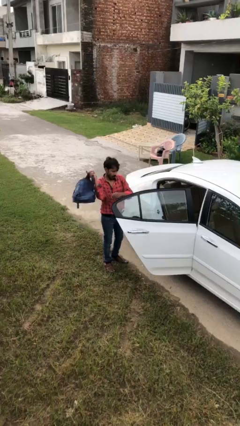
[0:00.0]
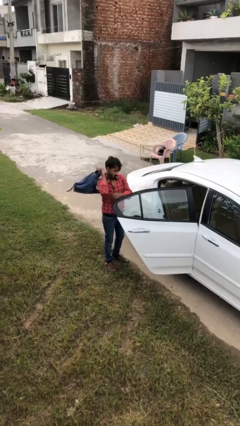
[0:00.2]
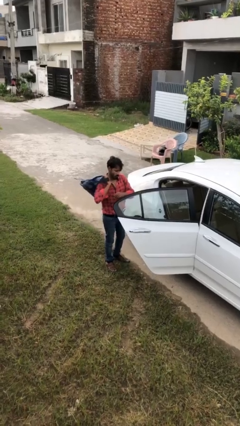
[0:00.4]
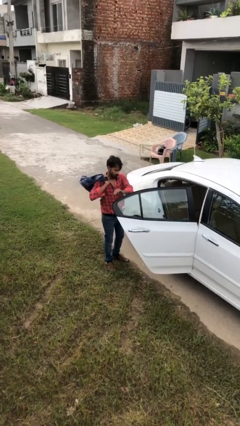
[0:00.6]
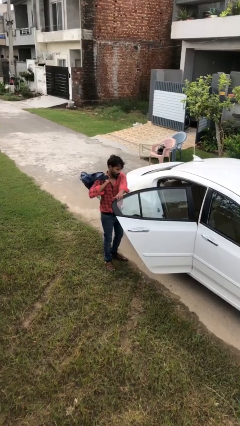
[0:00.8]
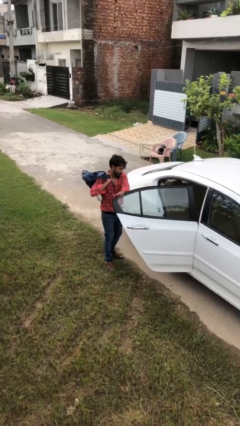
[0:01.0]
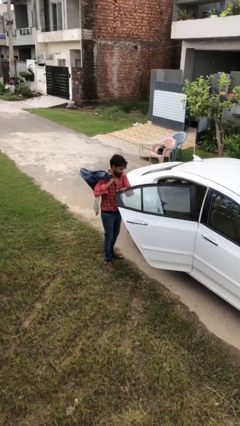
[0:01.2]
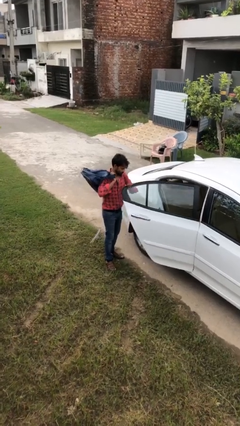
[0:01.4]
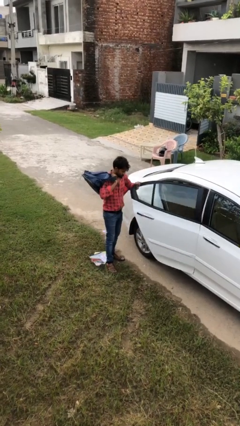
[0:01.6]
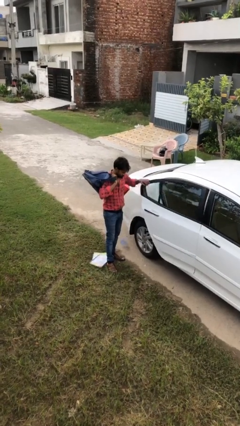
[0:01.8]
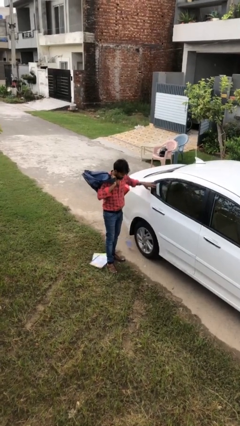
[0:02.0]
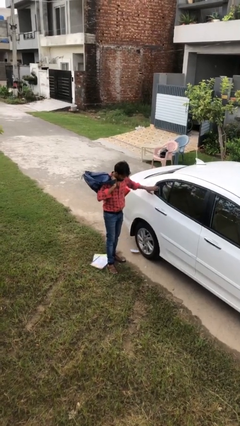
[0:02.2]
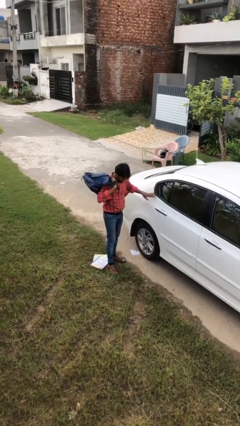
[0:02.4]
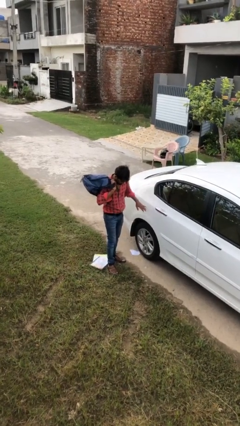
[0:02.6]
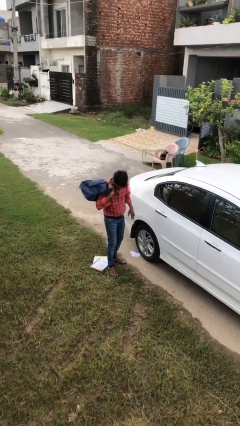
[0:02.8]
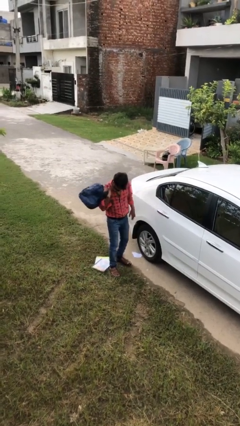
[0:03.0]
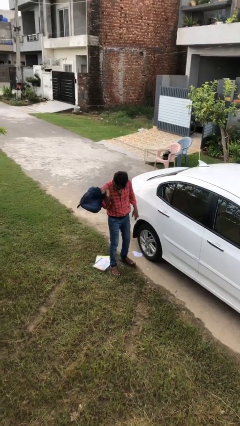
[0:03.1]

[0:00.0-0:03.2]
person closes car door

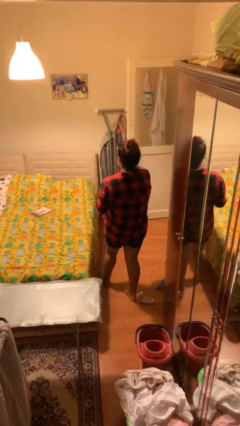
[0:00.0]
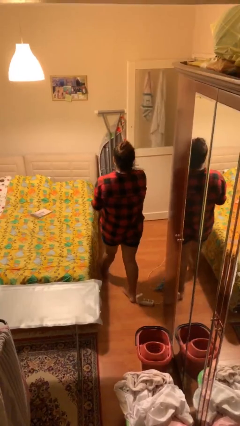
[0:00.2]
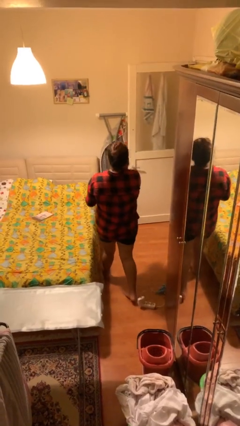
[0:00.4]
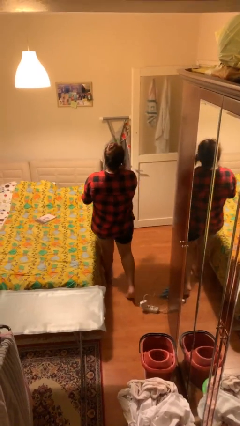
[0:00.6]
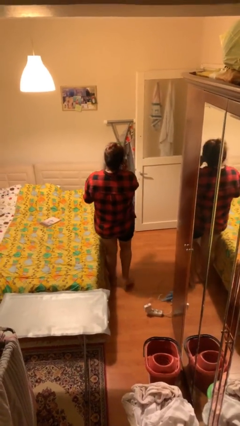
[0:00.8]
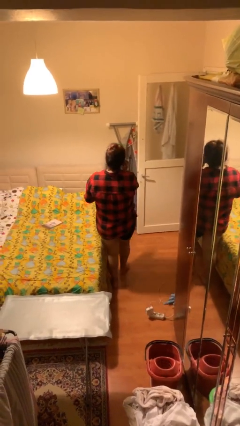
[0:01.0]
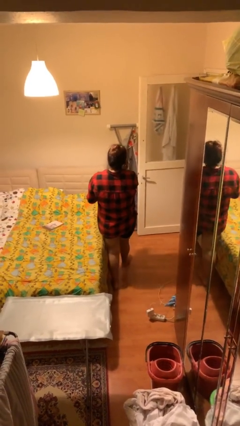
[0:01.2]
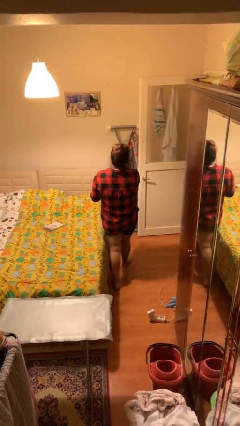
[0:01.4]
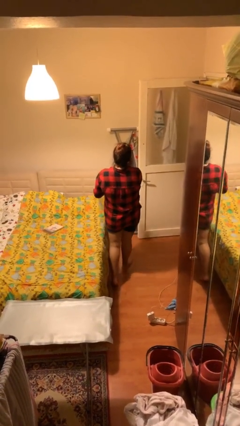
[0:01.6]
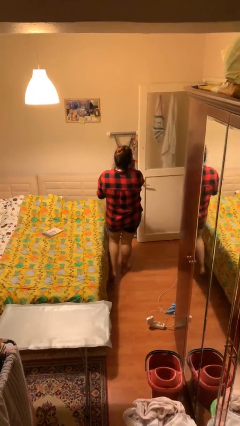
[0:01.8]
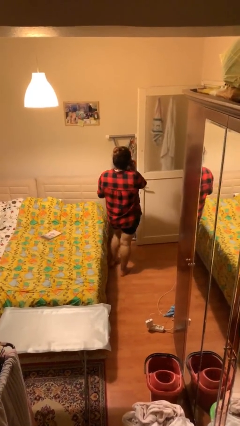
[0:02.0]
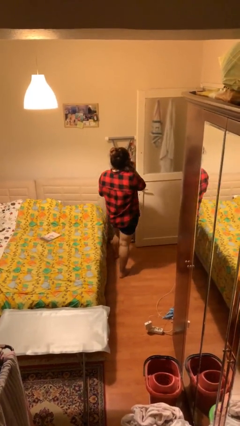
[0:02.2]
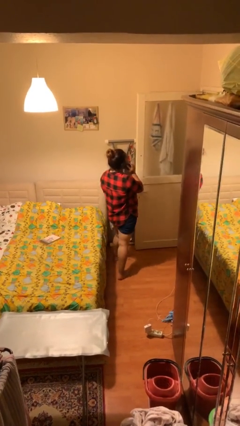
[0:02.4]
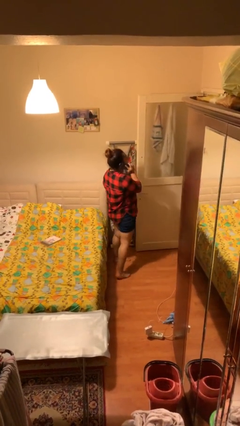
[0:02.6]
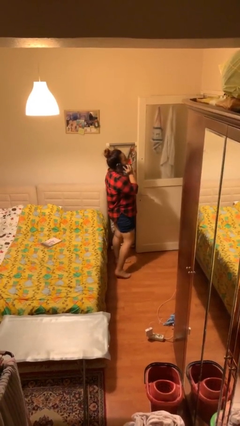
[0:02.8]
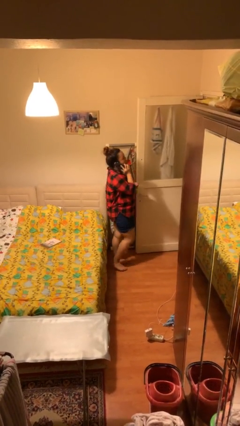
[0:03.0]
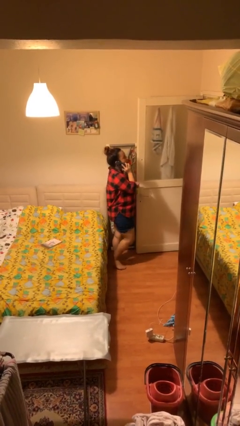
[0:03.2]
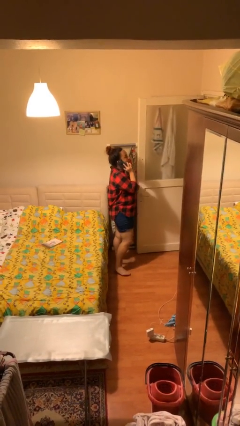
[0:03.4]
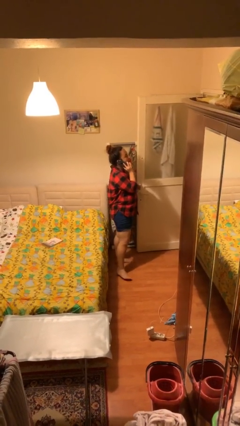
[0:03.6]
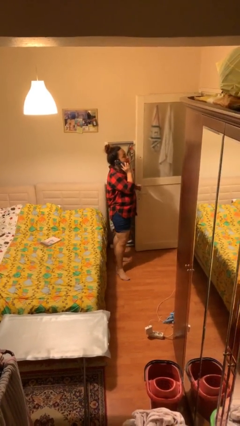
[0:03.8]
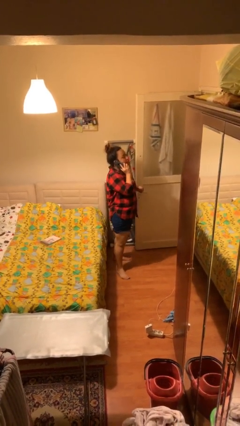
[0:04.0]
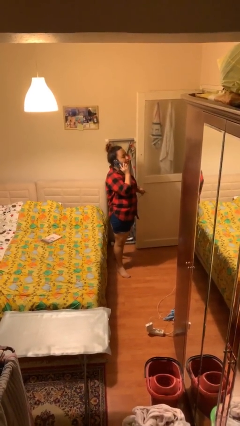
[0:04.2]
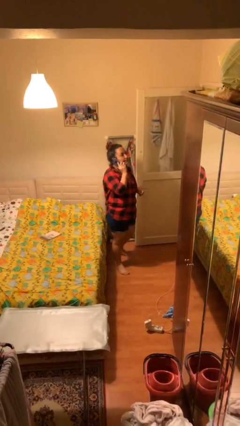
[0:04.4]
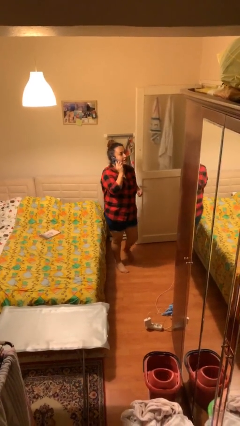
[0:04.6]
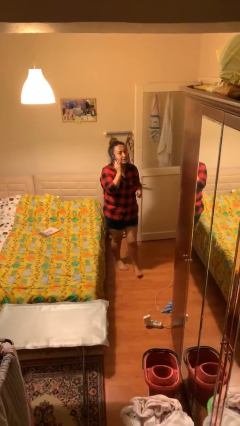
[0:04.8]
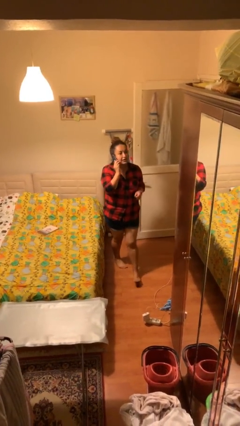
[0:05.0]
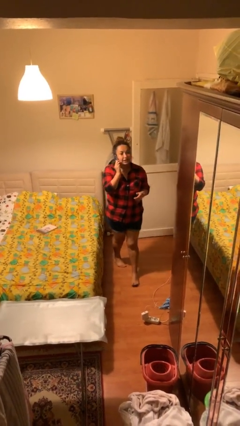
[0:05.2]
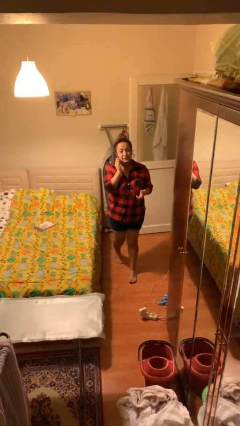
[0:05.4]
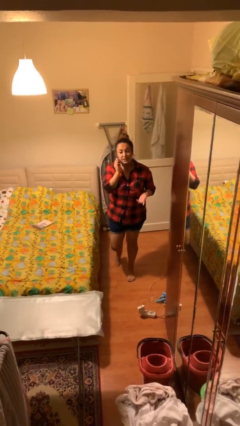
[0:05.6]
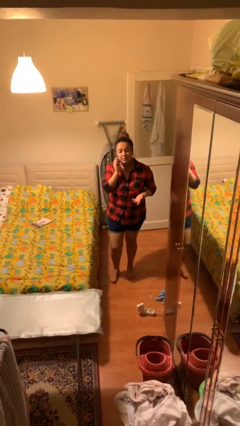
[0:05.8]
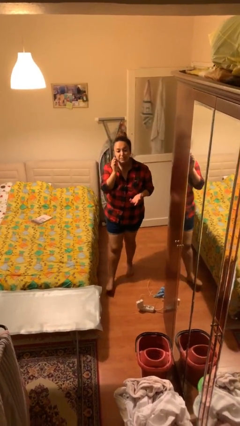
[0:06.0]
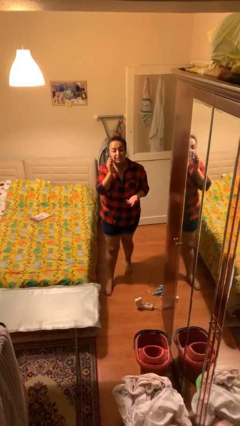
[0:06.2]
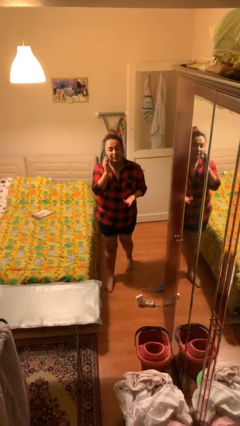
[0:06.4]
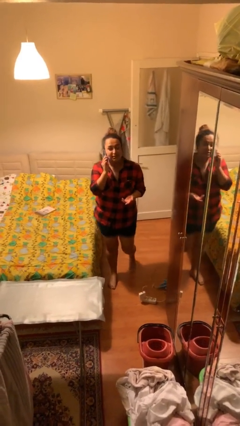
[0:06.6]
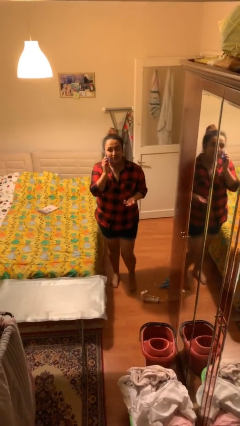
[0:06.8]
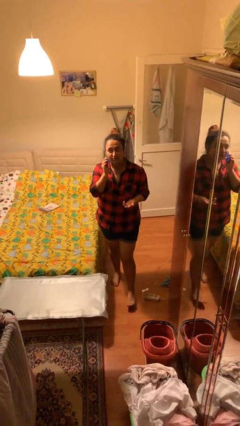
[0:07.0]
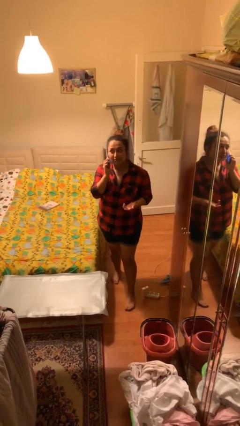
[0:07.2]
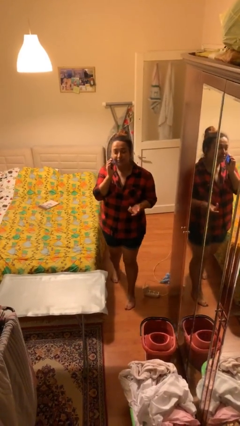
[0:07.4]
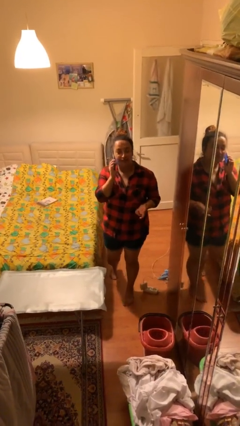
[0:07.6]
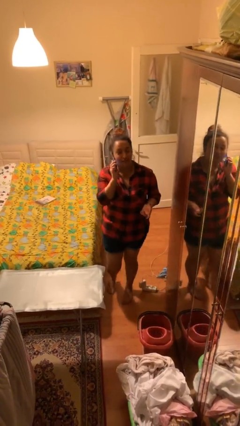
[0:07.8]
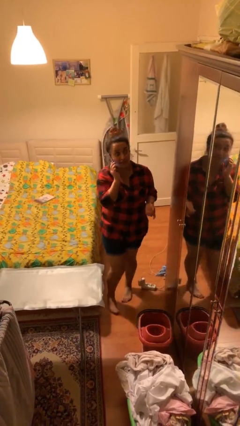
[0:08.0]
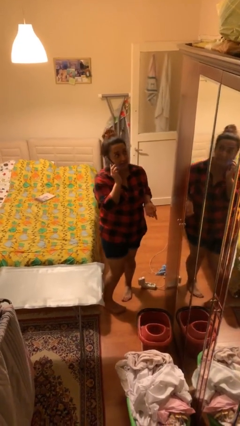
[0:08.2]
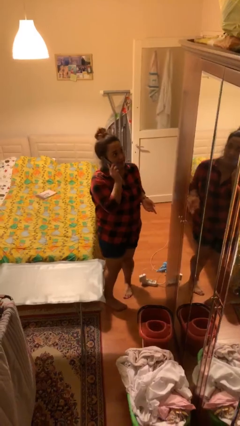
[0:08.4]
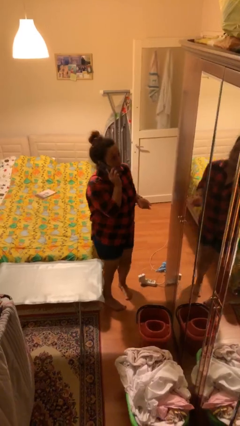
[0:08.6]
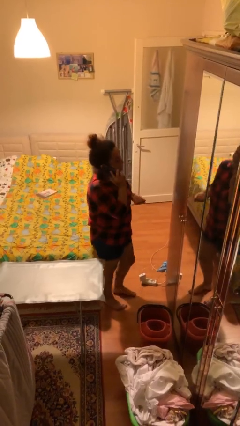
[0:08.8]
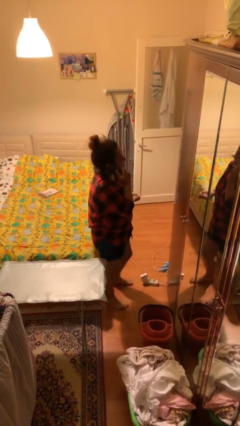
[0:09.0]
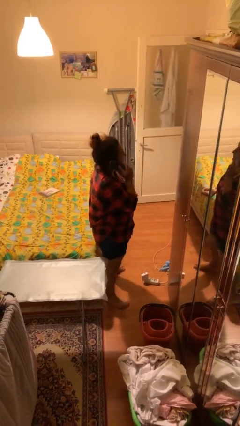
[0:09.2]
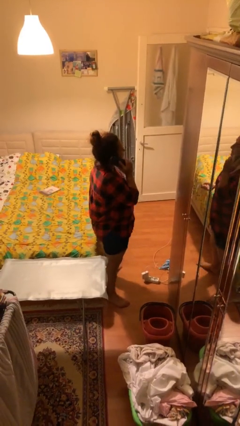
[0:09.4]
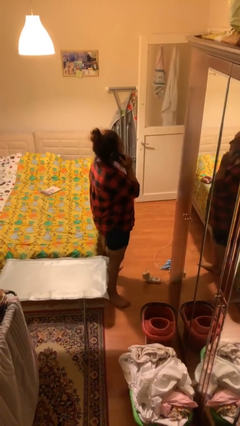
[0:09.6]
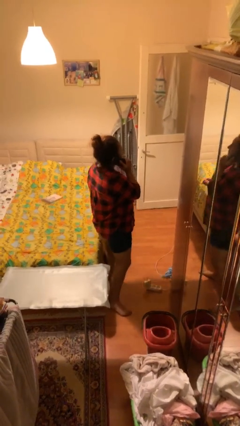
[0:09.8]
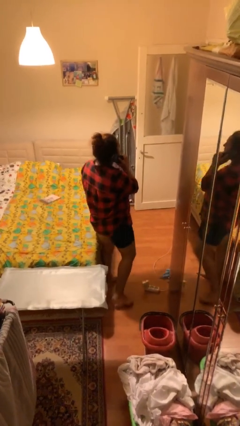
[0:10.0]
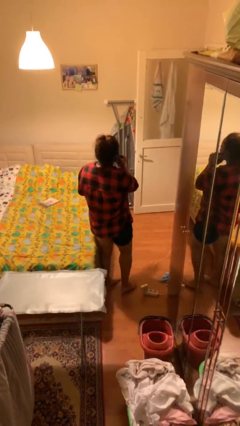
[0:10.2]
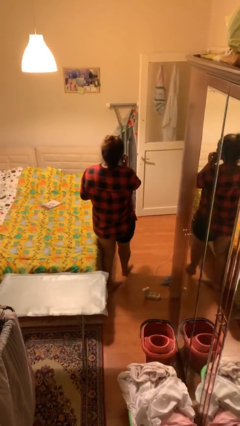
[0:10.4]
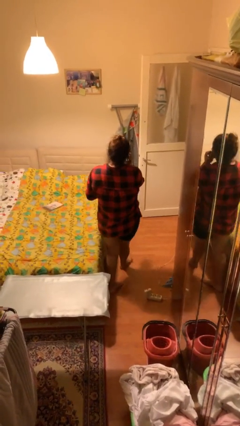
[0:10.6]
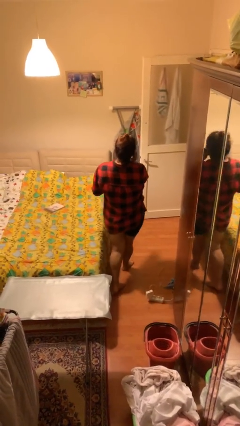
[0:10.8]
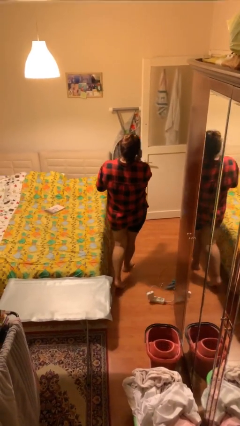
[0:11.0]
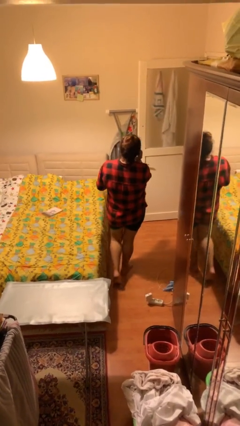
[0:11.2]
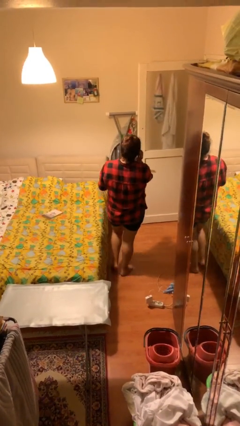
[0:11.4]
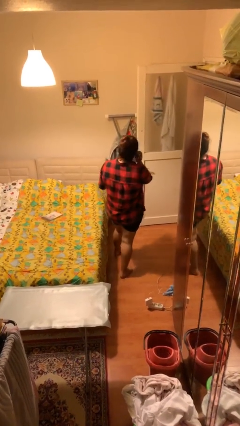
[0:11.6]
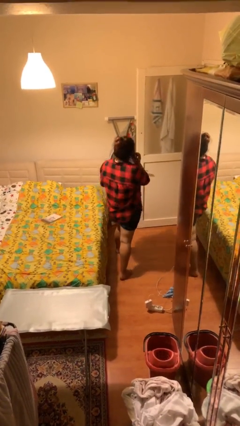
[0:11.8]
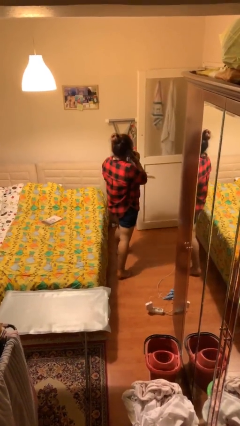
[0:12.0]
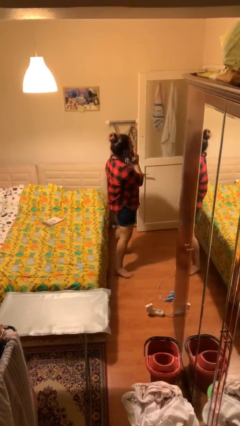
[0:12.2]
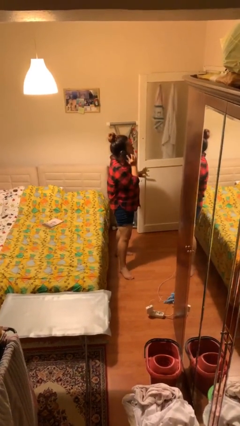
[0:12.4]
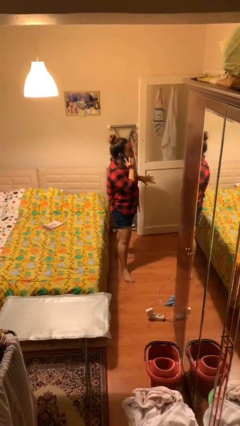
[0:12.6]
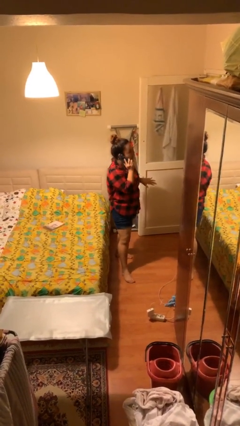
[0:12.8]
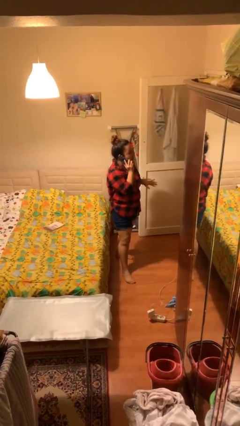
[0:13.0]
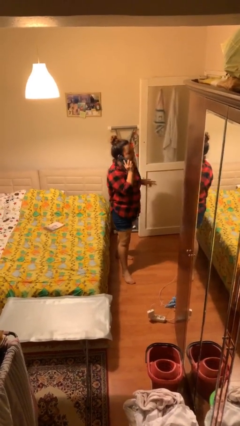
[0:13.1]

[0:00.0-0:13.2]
person talks on phone

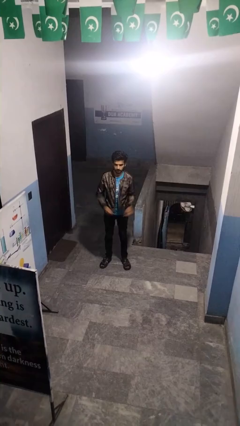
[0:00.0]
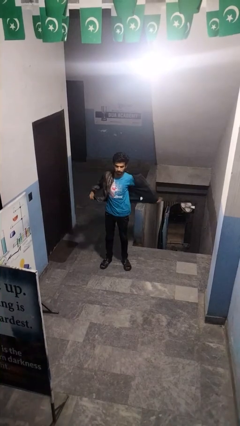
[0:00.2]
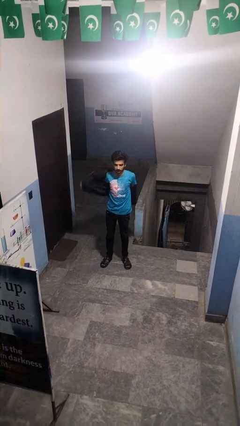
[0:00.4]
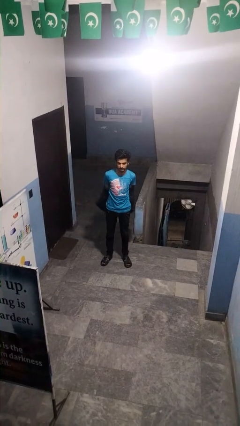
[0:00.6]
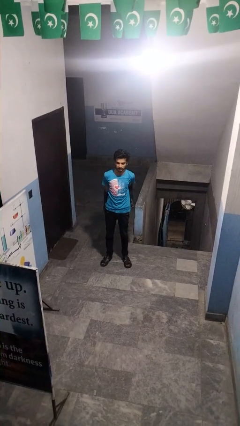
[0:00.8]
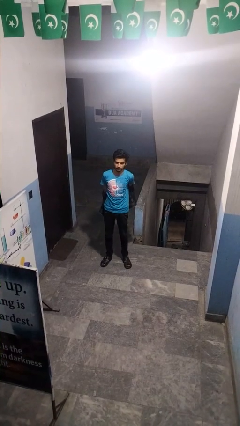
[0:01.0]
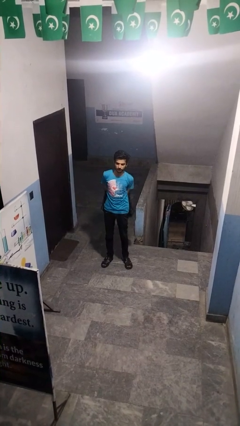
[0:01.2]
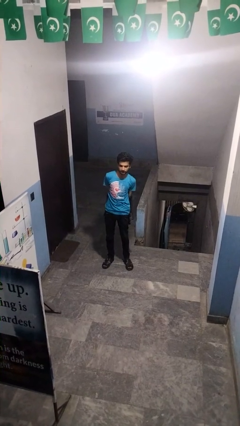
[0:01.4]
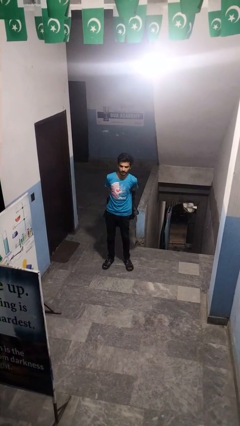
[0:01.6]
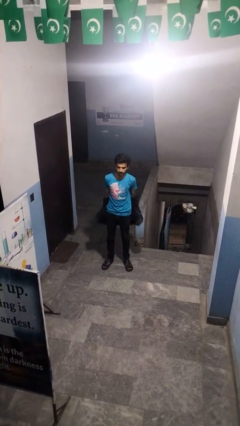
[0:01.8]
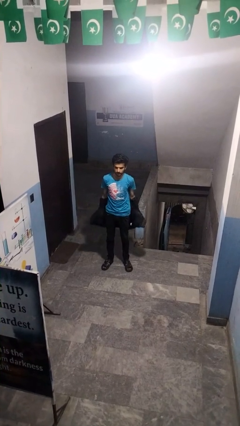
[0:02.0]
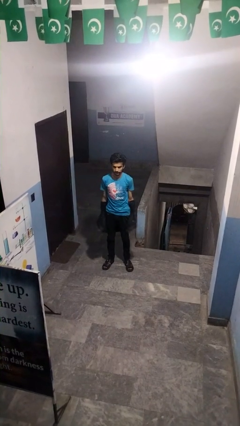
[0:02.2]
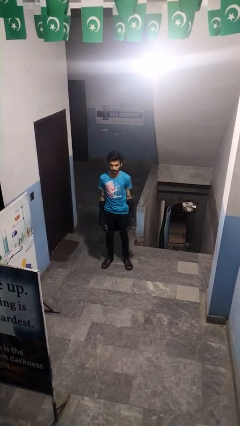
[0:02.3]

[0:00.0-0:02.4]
person takes off jacket
